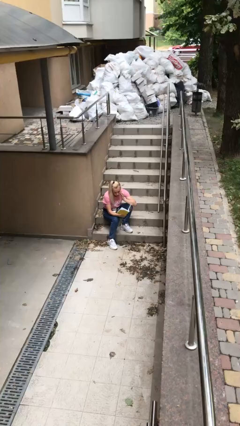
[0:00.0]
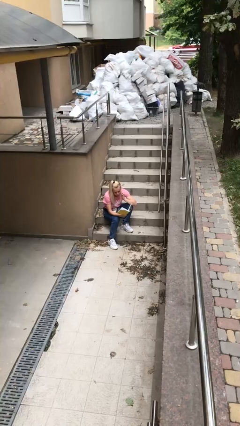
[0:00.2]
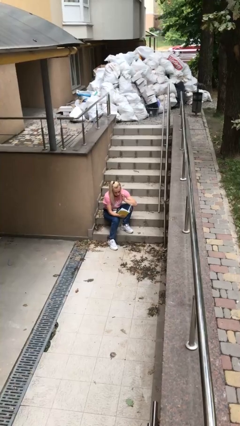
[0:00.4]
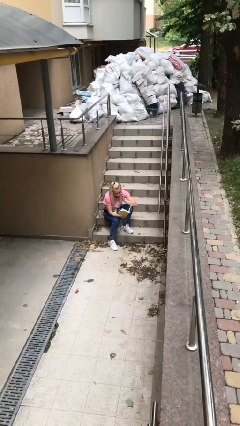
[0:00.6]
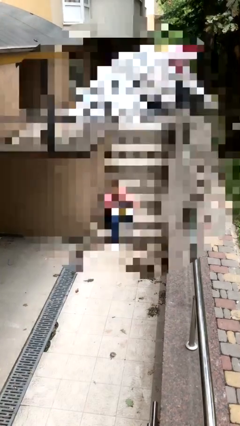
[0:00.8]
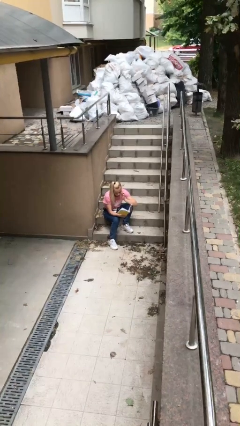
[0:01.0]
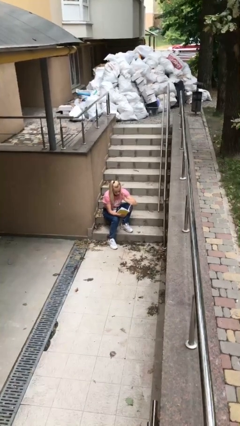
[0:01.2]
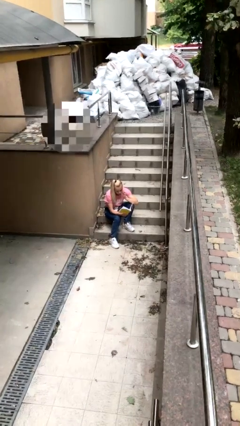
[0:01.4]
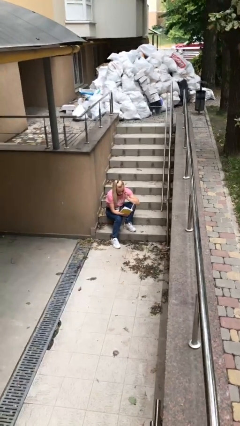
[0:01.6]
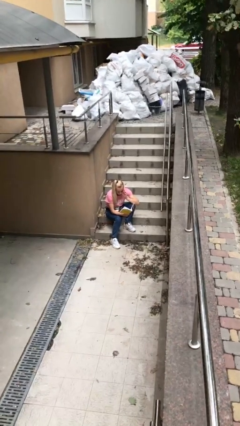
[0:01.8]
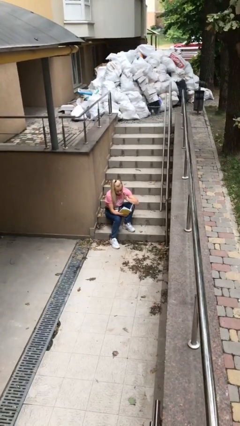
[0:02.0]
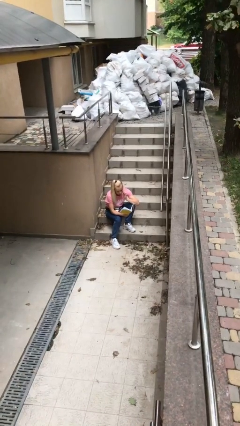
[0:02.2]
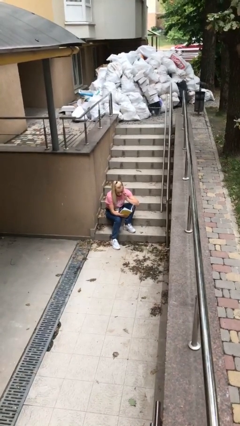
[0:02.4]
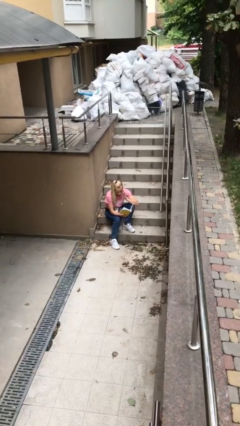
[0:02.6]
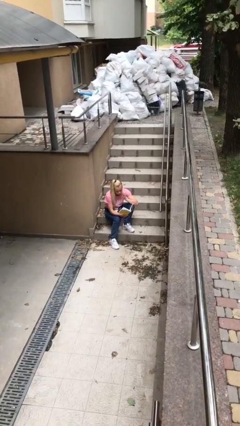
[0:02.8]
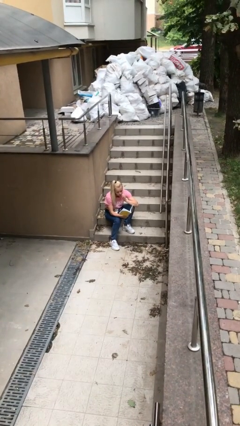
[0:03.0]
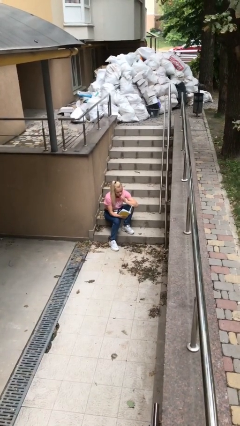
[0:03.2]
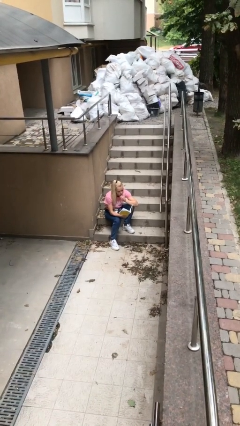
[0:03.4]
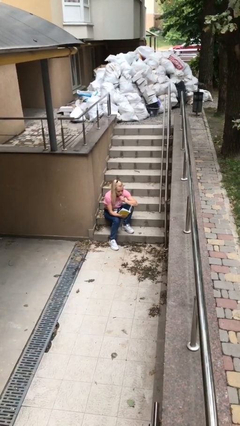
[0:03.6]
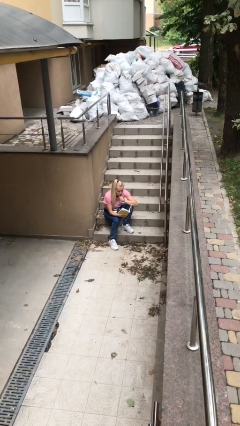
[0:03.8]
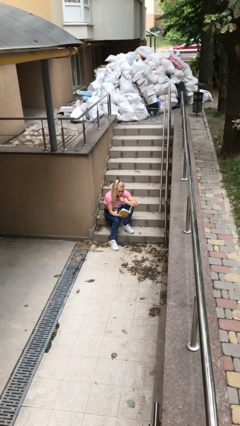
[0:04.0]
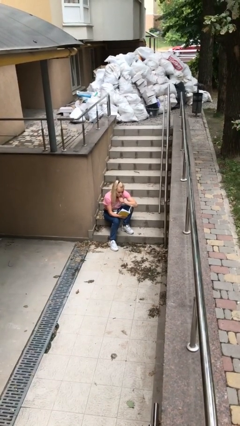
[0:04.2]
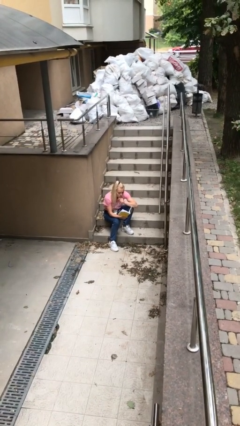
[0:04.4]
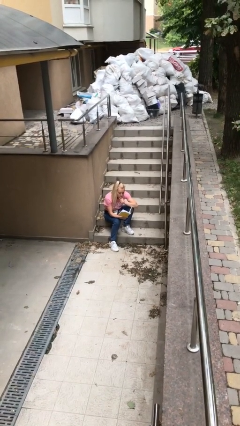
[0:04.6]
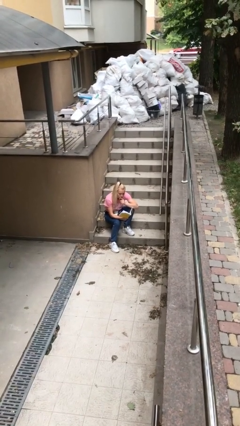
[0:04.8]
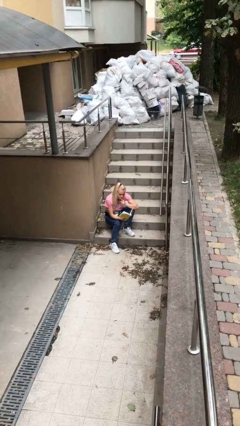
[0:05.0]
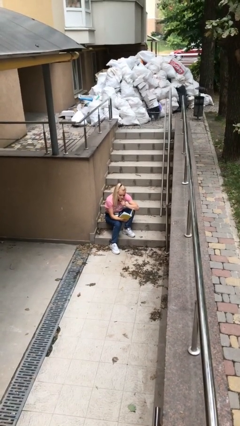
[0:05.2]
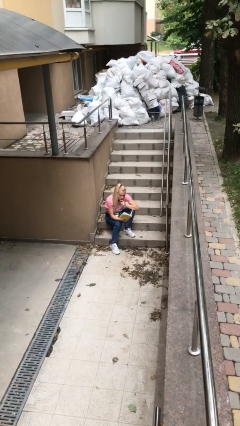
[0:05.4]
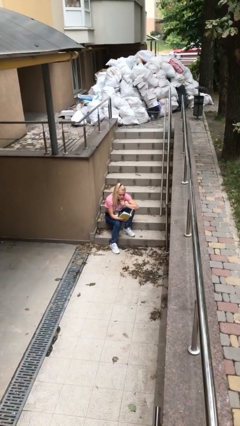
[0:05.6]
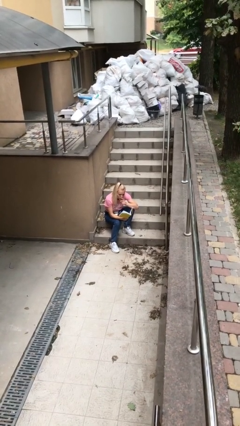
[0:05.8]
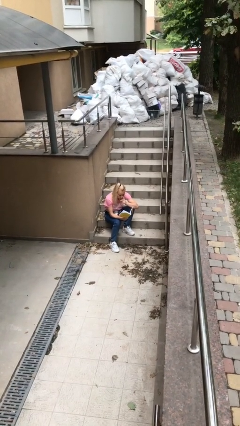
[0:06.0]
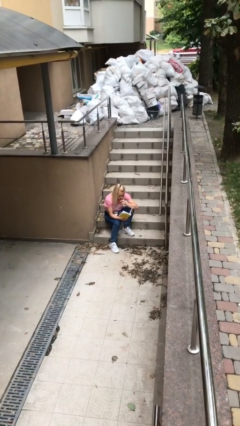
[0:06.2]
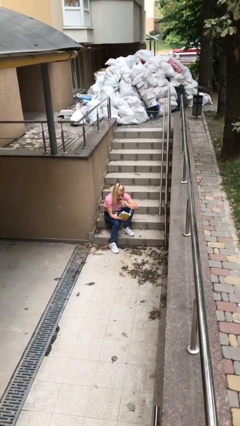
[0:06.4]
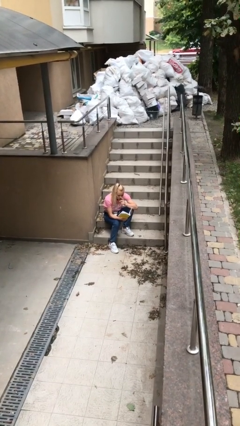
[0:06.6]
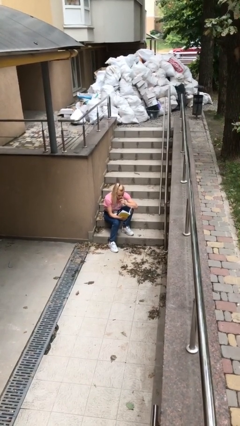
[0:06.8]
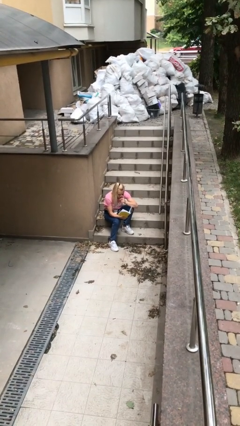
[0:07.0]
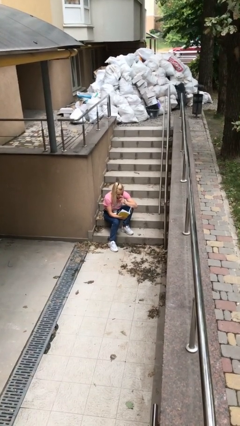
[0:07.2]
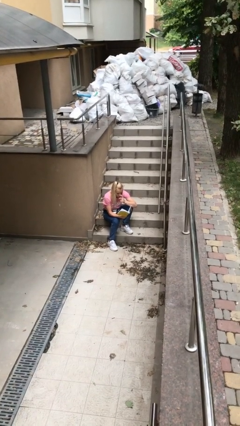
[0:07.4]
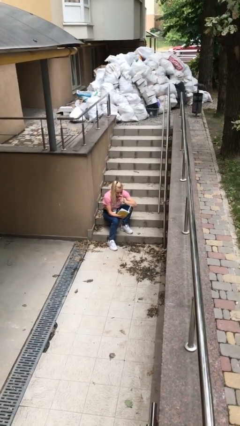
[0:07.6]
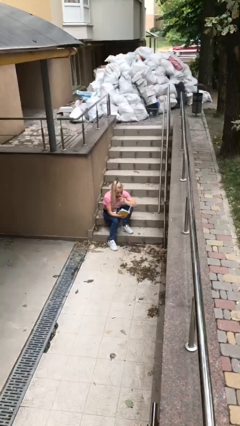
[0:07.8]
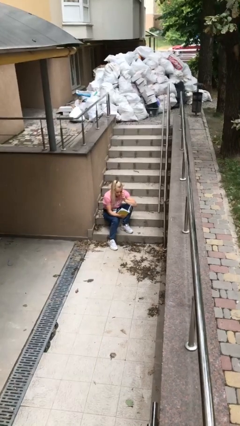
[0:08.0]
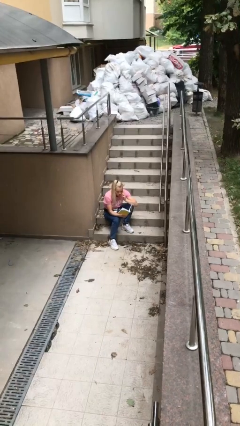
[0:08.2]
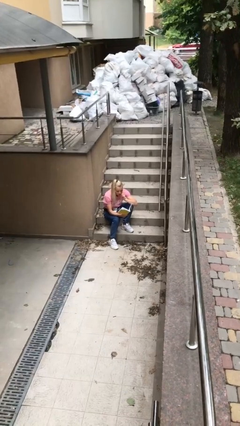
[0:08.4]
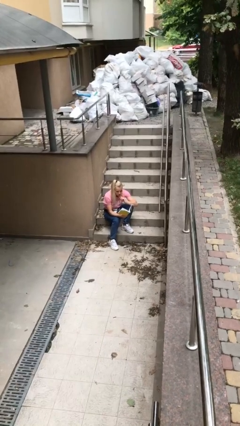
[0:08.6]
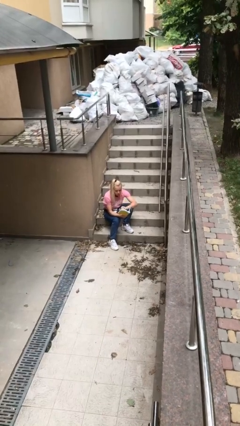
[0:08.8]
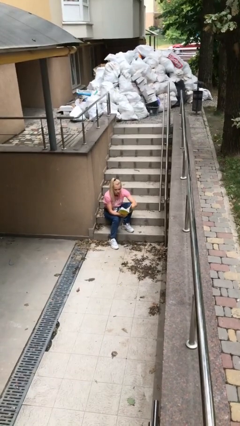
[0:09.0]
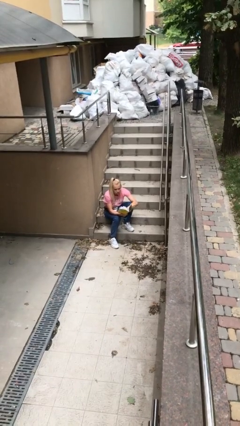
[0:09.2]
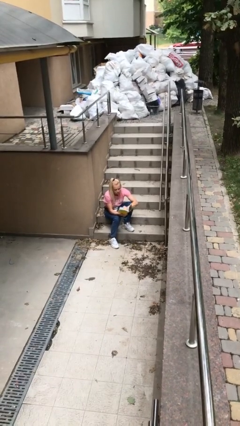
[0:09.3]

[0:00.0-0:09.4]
person reads document

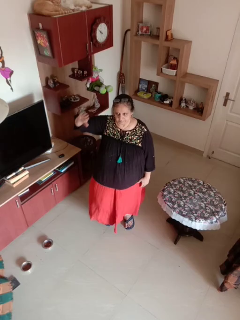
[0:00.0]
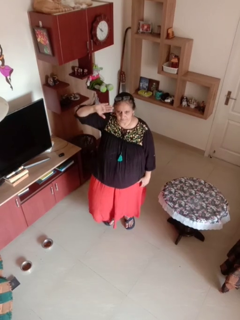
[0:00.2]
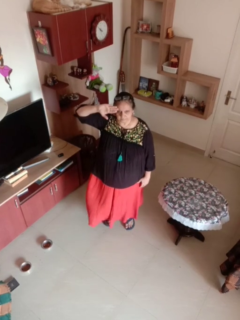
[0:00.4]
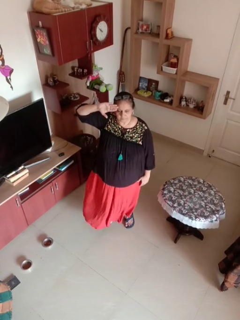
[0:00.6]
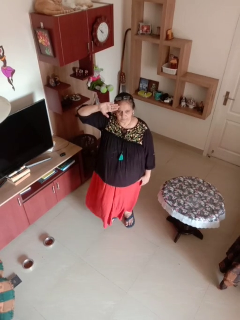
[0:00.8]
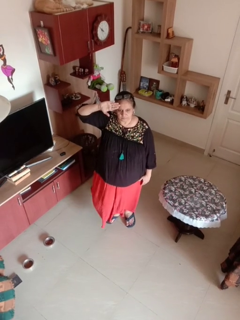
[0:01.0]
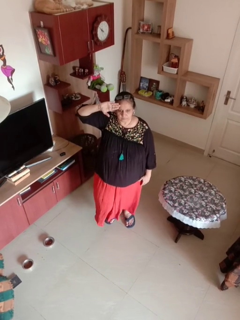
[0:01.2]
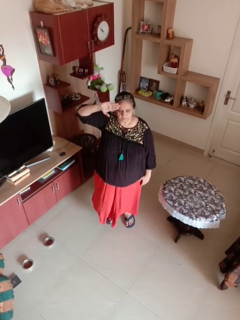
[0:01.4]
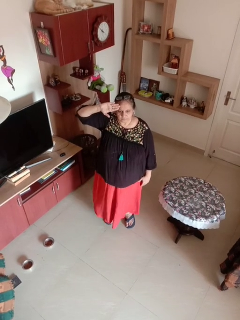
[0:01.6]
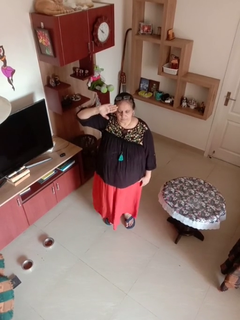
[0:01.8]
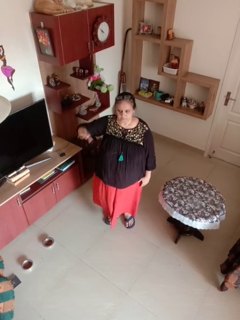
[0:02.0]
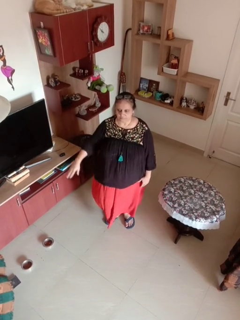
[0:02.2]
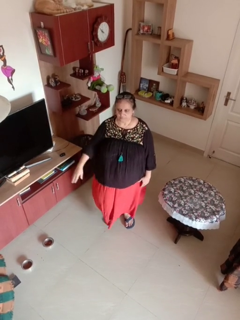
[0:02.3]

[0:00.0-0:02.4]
person salutes

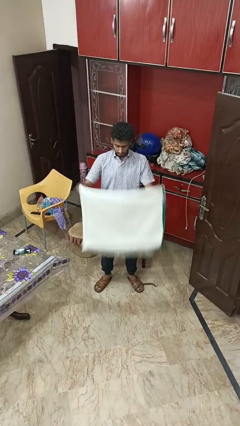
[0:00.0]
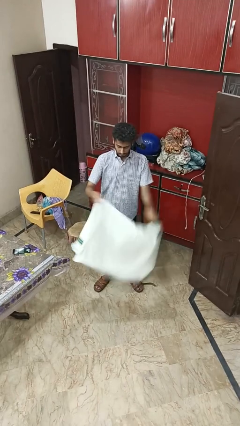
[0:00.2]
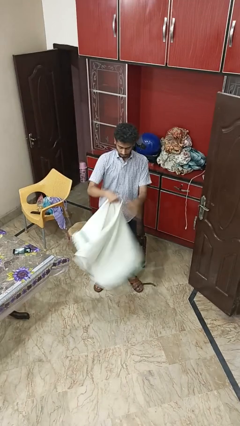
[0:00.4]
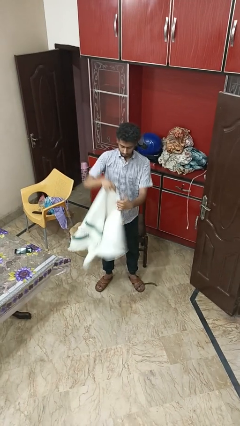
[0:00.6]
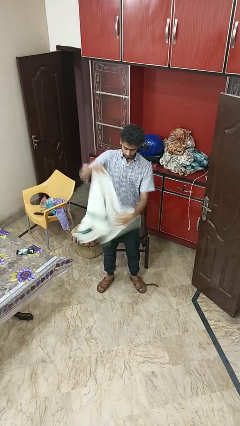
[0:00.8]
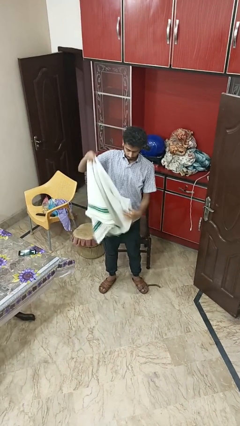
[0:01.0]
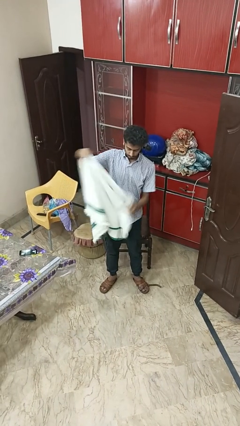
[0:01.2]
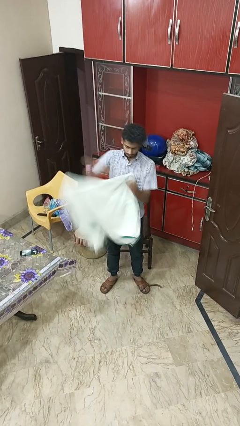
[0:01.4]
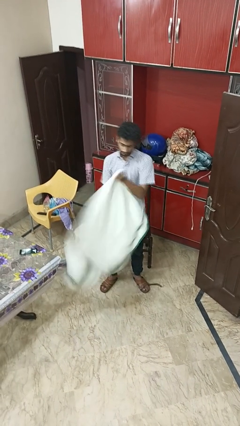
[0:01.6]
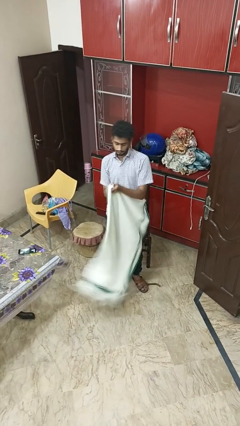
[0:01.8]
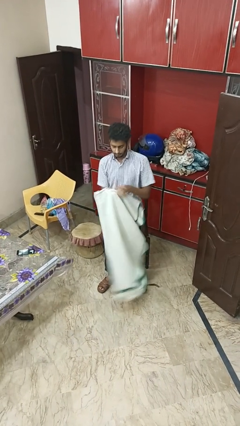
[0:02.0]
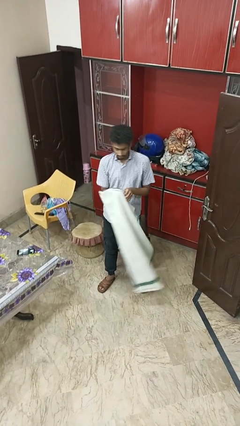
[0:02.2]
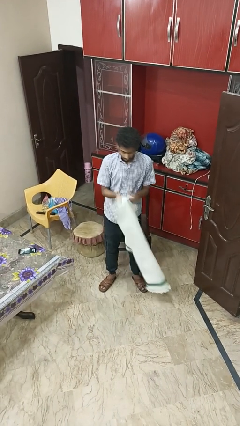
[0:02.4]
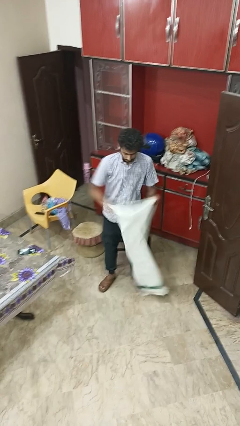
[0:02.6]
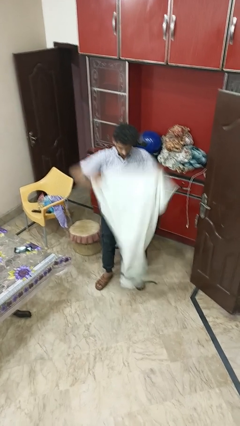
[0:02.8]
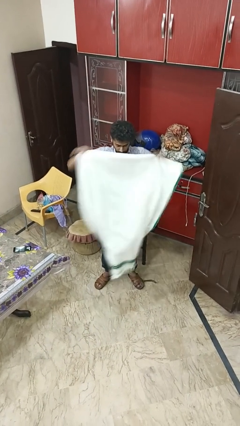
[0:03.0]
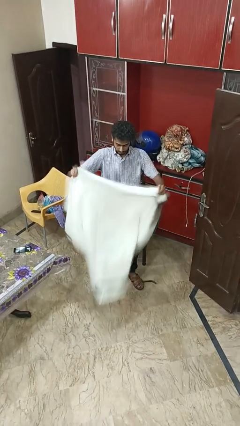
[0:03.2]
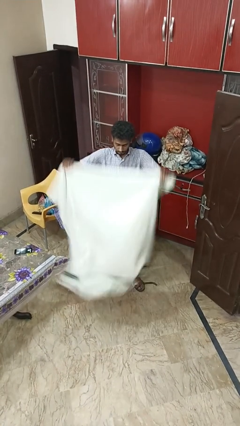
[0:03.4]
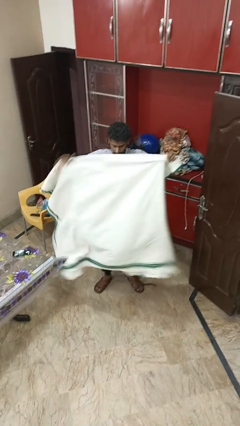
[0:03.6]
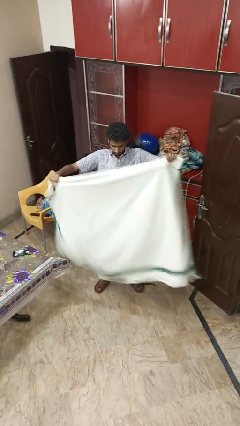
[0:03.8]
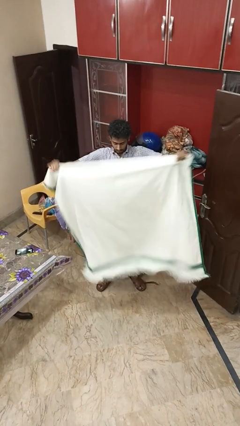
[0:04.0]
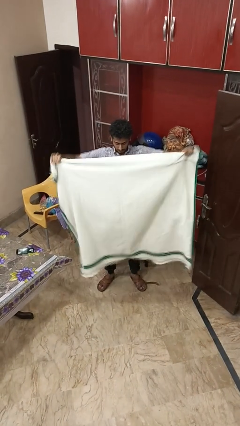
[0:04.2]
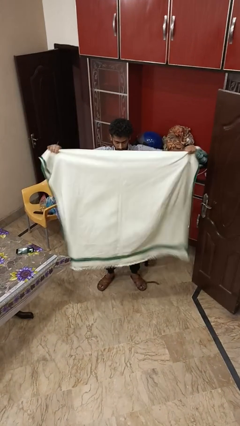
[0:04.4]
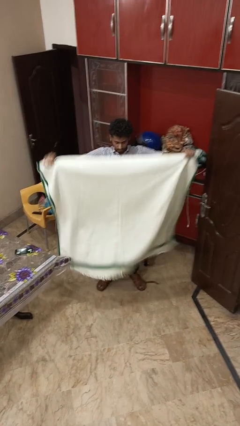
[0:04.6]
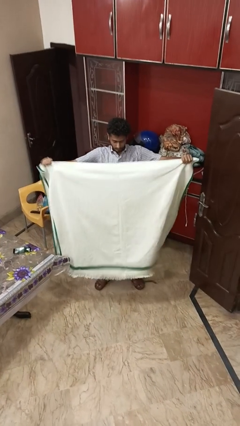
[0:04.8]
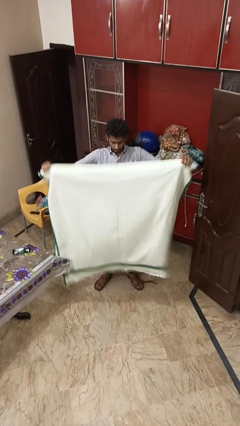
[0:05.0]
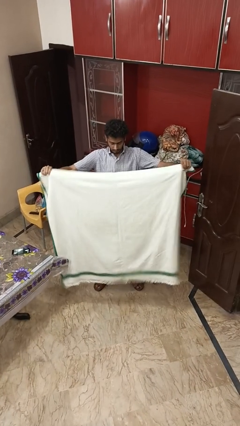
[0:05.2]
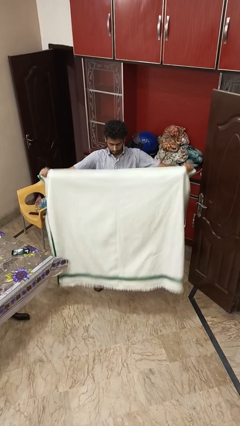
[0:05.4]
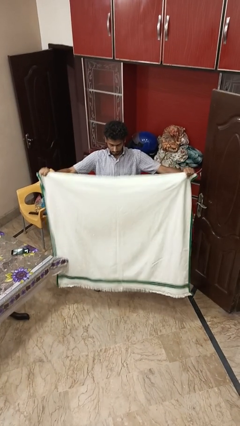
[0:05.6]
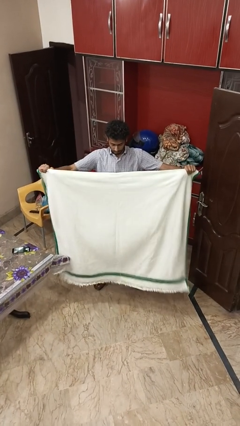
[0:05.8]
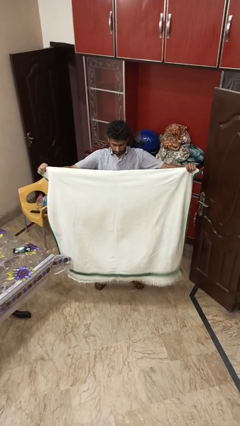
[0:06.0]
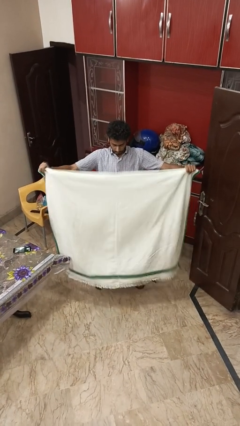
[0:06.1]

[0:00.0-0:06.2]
person unfolds blanket

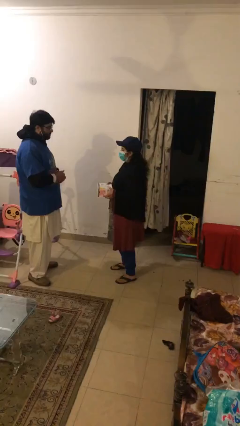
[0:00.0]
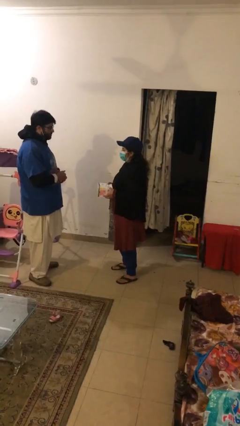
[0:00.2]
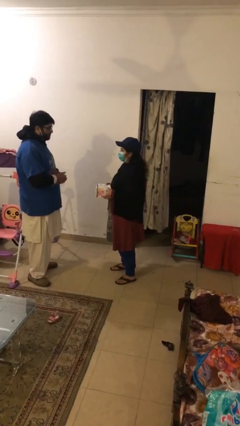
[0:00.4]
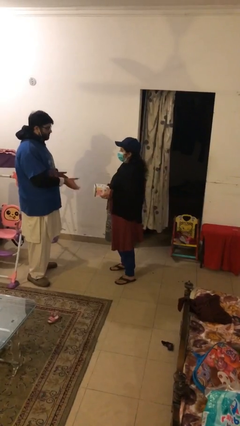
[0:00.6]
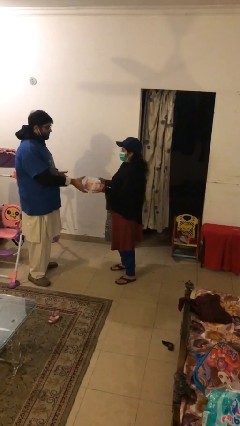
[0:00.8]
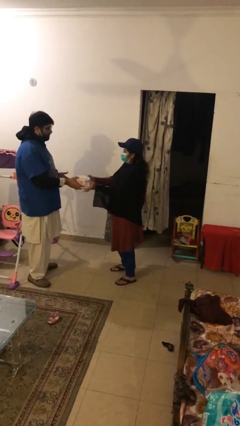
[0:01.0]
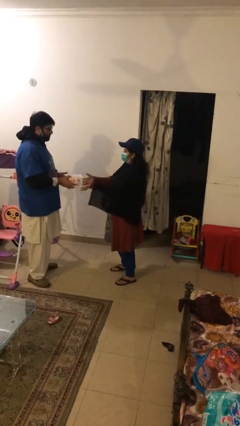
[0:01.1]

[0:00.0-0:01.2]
person transfers object to person
